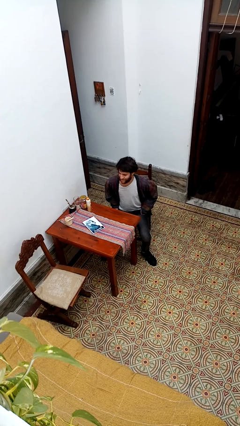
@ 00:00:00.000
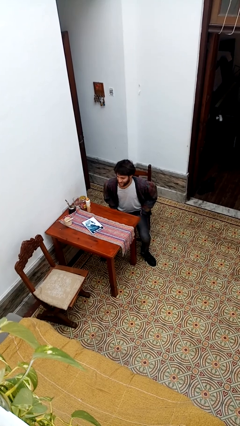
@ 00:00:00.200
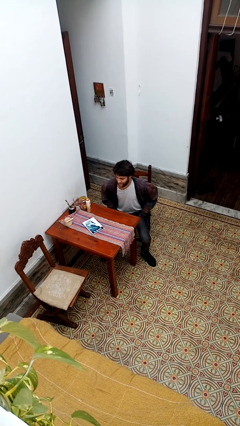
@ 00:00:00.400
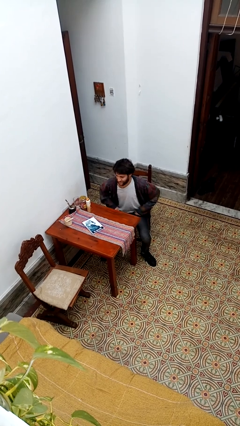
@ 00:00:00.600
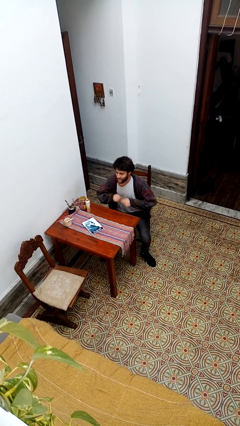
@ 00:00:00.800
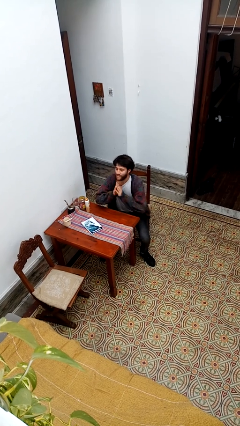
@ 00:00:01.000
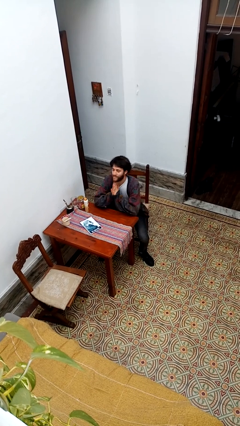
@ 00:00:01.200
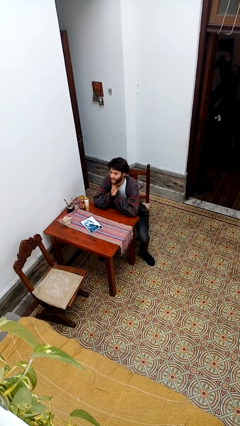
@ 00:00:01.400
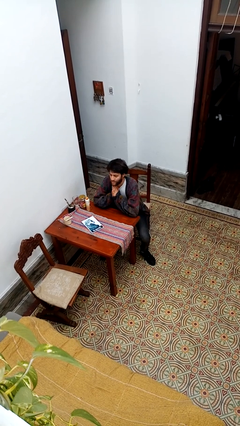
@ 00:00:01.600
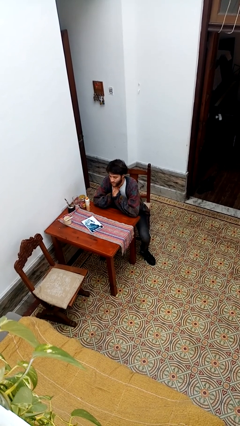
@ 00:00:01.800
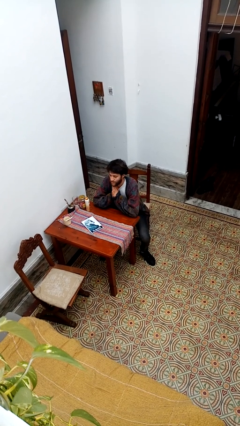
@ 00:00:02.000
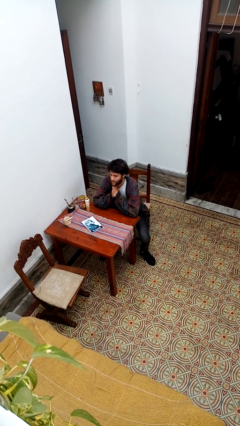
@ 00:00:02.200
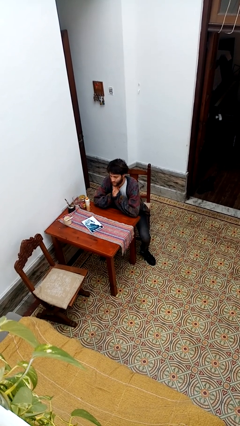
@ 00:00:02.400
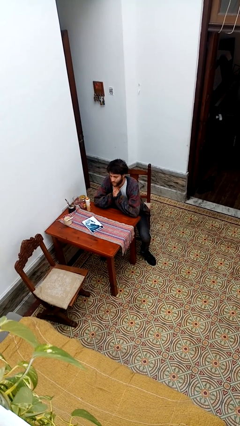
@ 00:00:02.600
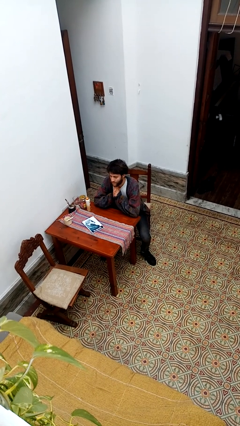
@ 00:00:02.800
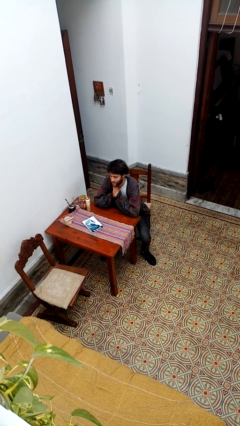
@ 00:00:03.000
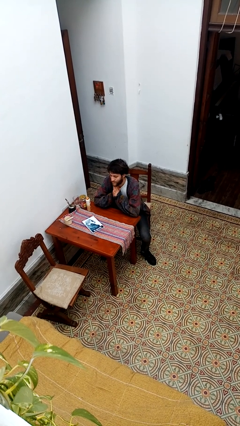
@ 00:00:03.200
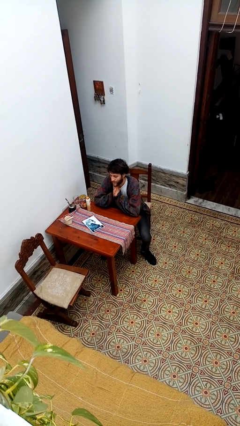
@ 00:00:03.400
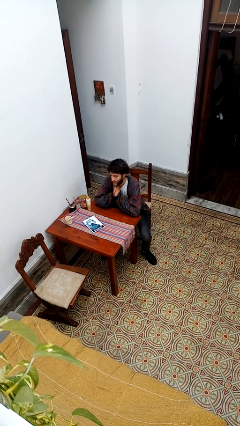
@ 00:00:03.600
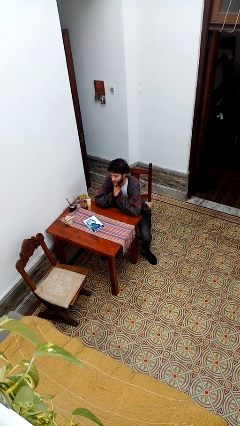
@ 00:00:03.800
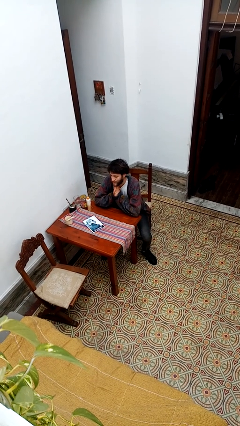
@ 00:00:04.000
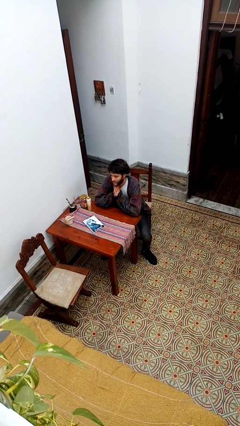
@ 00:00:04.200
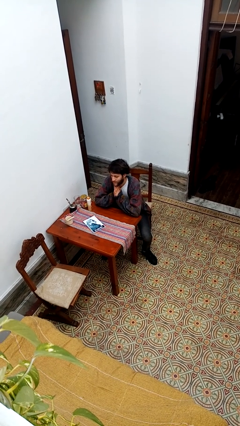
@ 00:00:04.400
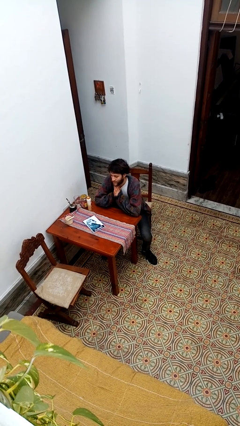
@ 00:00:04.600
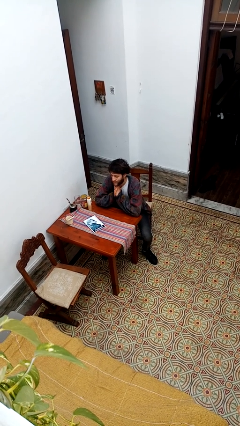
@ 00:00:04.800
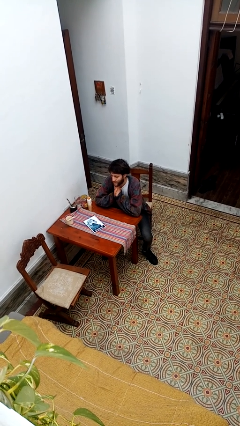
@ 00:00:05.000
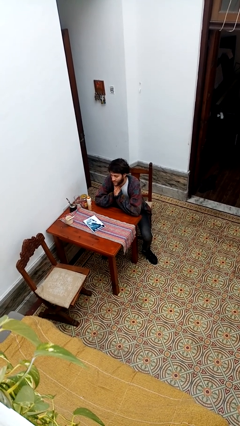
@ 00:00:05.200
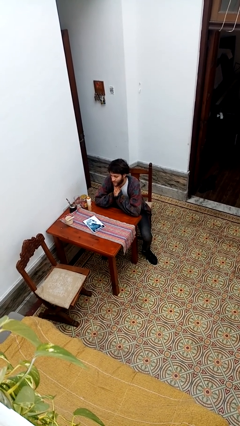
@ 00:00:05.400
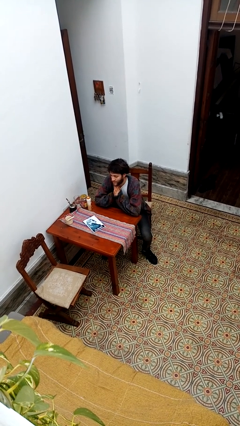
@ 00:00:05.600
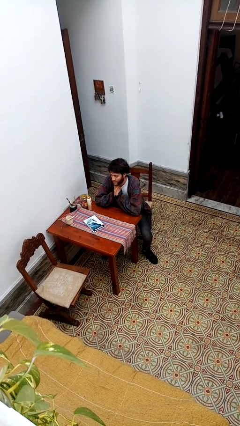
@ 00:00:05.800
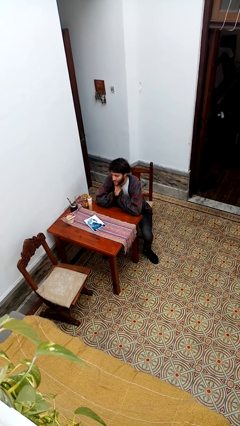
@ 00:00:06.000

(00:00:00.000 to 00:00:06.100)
person prays

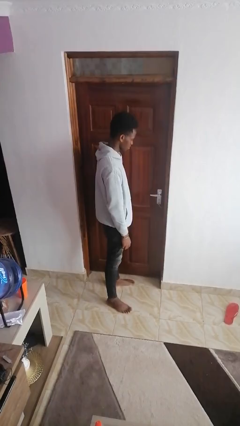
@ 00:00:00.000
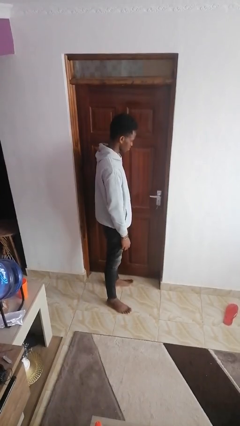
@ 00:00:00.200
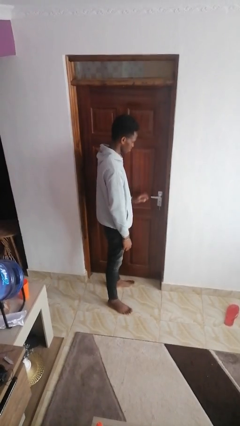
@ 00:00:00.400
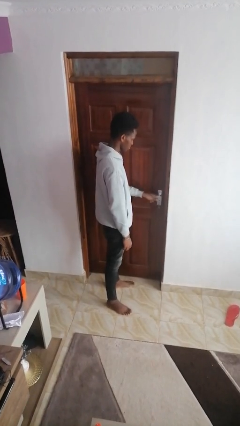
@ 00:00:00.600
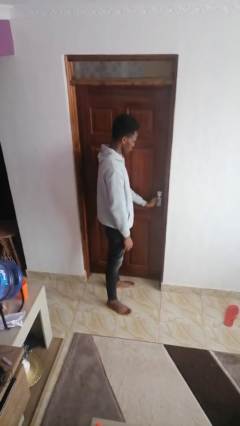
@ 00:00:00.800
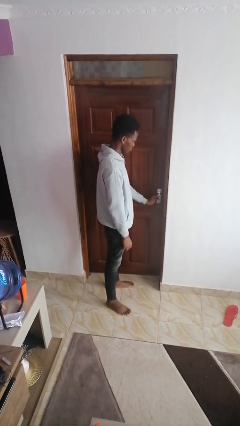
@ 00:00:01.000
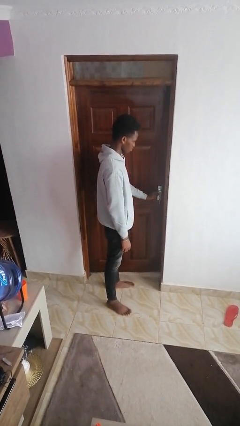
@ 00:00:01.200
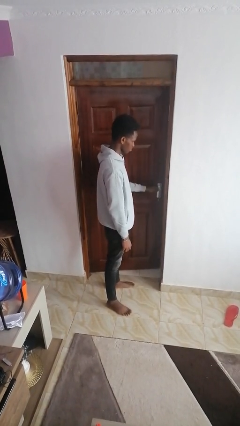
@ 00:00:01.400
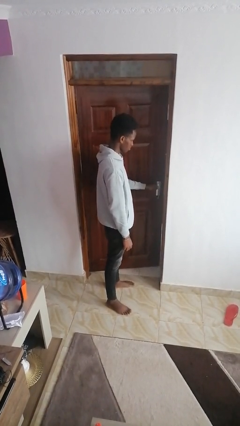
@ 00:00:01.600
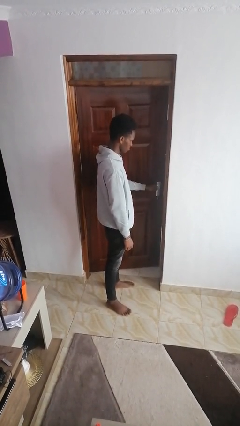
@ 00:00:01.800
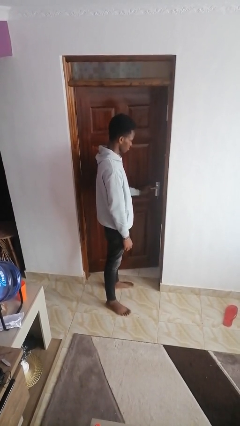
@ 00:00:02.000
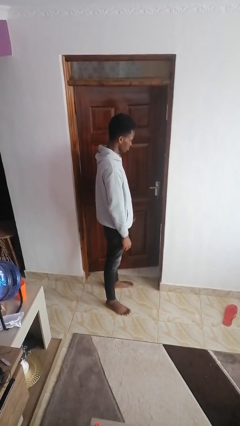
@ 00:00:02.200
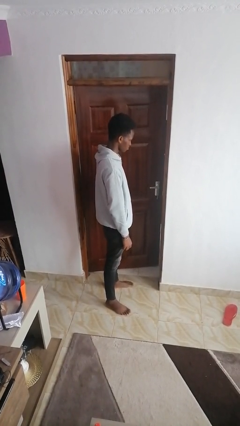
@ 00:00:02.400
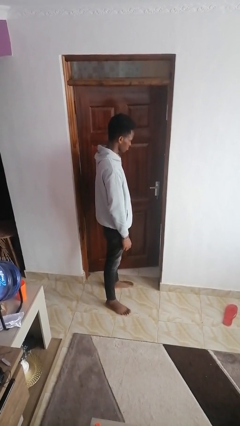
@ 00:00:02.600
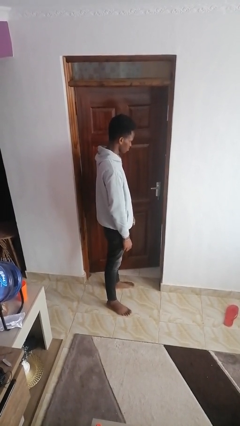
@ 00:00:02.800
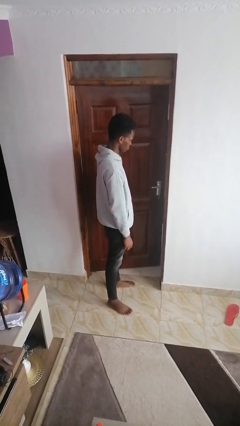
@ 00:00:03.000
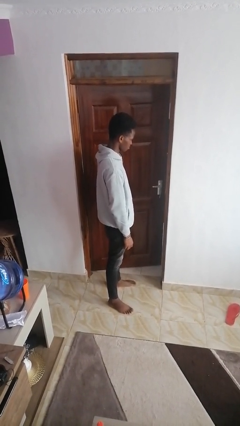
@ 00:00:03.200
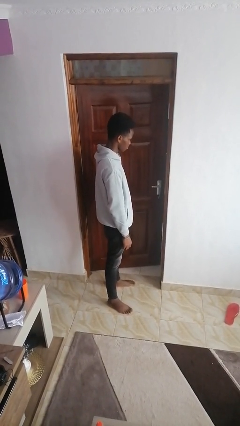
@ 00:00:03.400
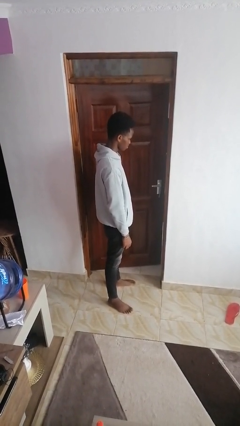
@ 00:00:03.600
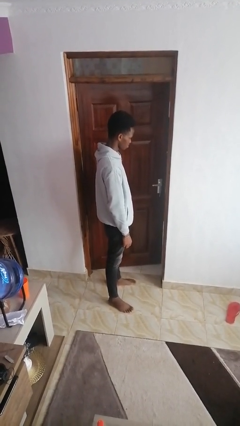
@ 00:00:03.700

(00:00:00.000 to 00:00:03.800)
person opens facility door

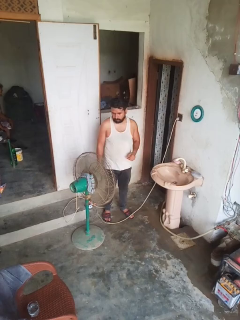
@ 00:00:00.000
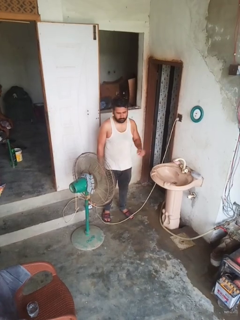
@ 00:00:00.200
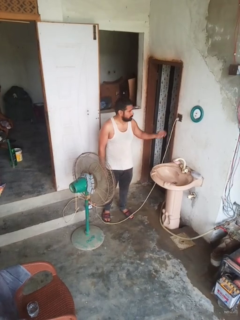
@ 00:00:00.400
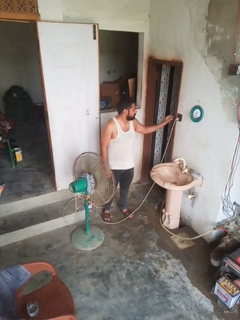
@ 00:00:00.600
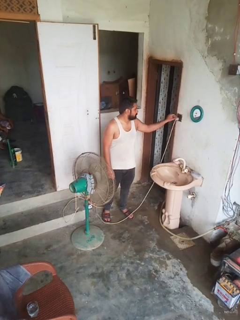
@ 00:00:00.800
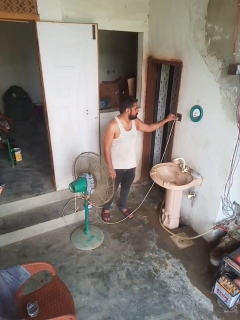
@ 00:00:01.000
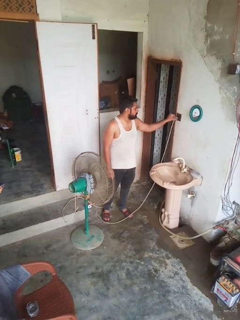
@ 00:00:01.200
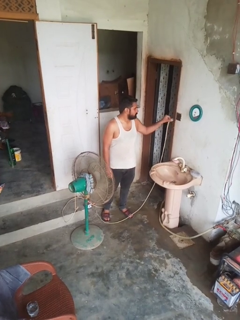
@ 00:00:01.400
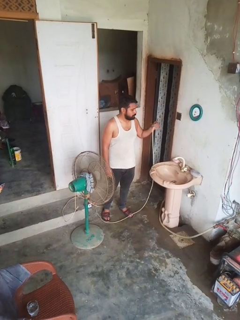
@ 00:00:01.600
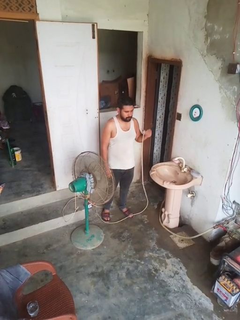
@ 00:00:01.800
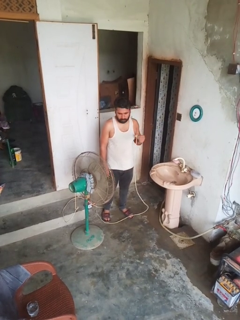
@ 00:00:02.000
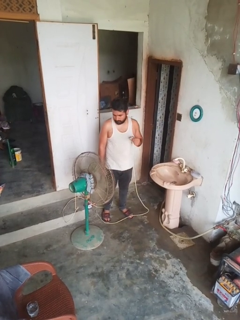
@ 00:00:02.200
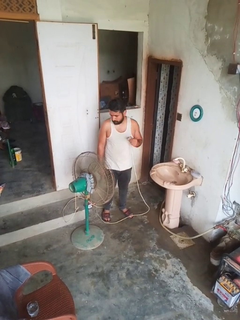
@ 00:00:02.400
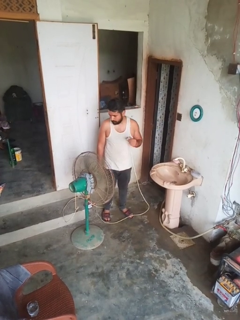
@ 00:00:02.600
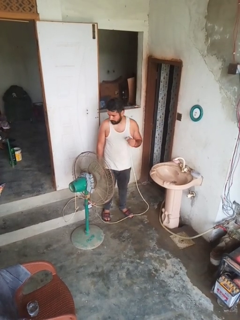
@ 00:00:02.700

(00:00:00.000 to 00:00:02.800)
person turns off fan

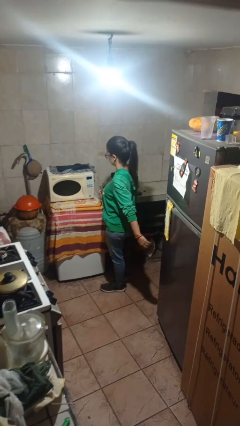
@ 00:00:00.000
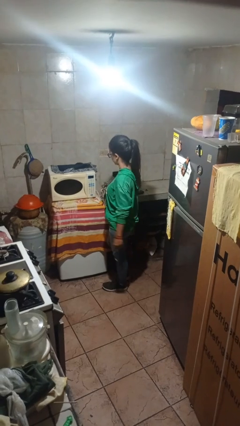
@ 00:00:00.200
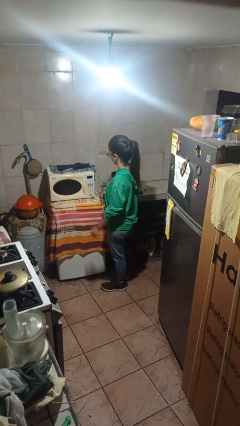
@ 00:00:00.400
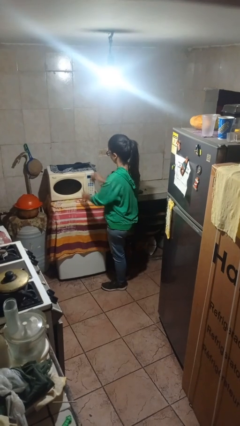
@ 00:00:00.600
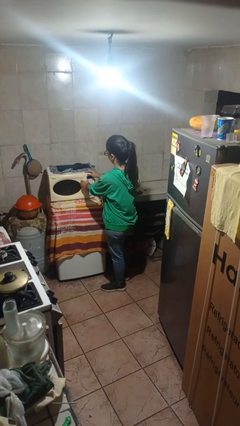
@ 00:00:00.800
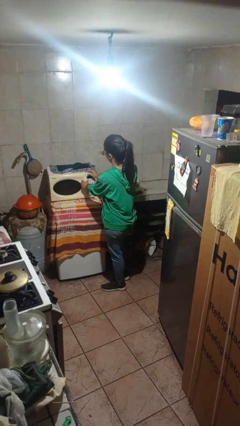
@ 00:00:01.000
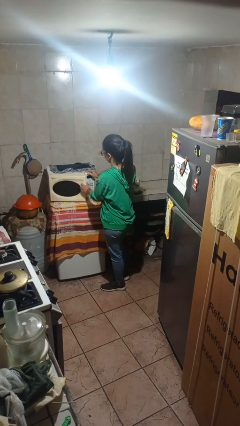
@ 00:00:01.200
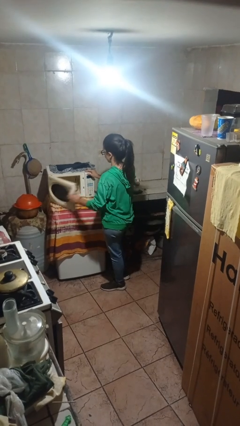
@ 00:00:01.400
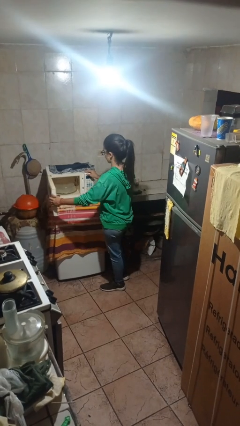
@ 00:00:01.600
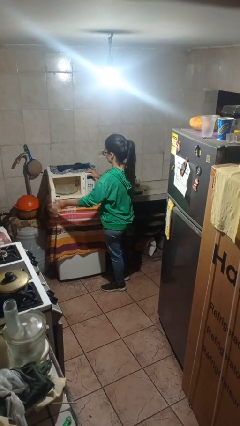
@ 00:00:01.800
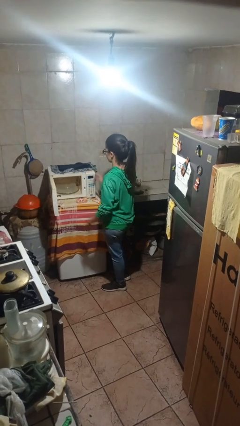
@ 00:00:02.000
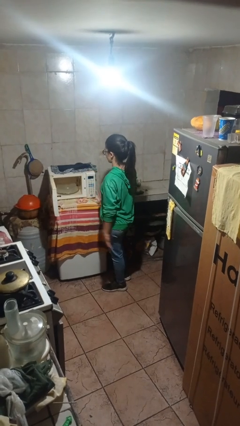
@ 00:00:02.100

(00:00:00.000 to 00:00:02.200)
person opens microwave

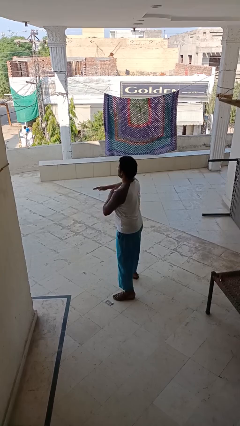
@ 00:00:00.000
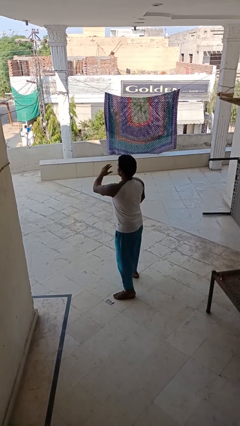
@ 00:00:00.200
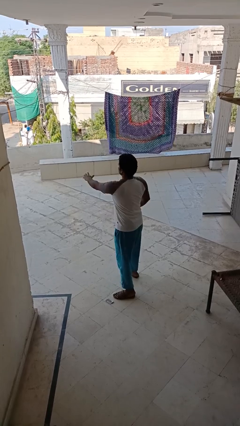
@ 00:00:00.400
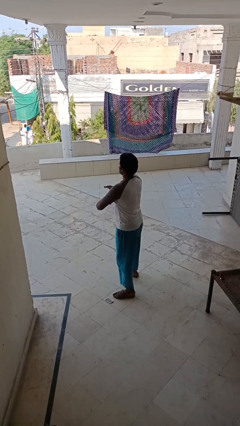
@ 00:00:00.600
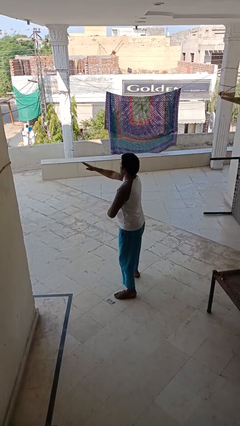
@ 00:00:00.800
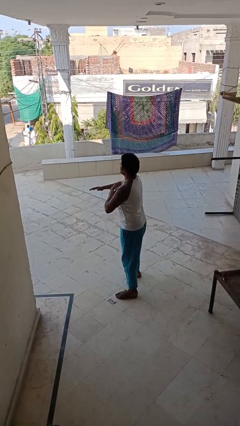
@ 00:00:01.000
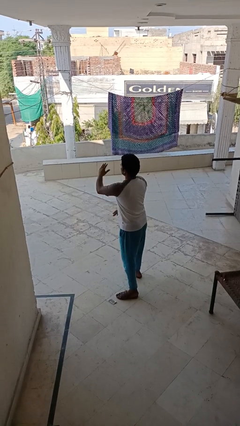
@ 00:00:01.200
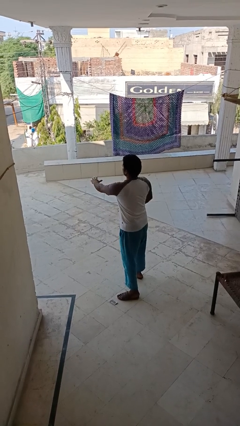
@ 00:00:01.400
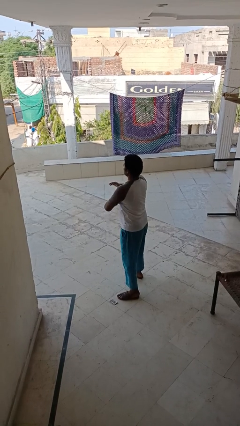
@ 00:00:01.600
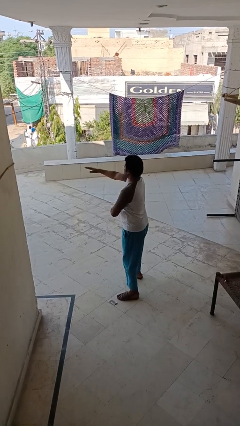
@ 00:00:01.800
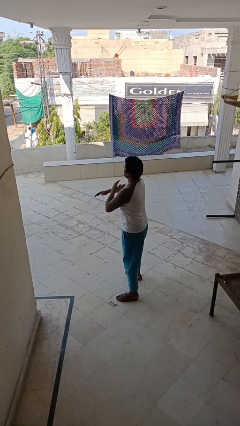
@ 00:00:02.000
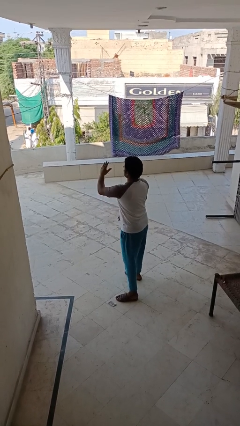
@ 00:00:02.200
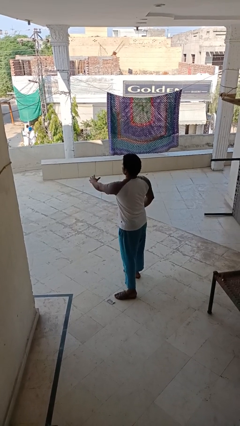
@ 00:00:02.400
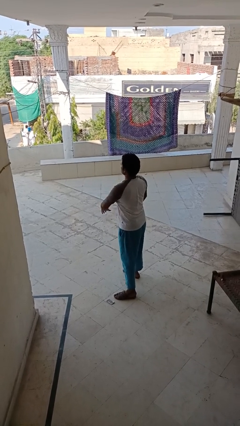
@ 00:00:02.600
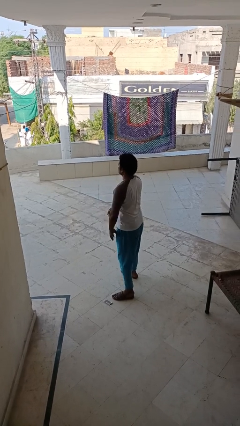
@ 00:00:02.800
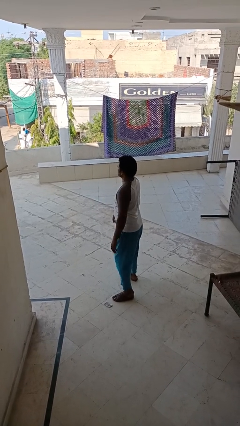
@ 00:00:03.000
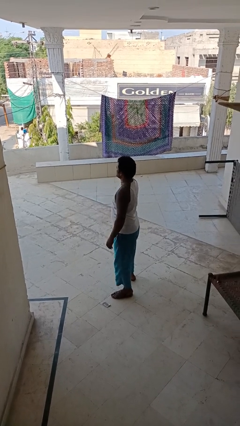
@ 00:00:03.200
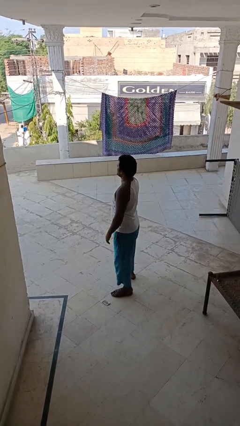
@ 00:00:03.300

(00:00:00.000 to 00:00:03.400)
person karate chop
